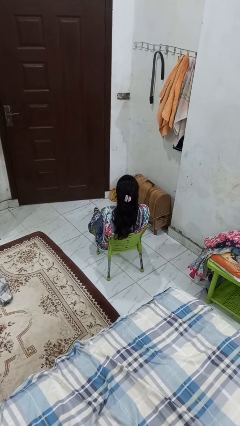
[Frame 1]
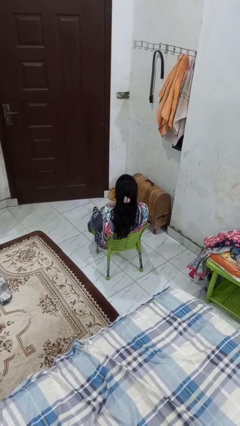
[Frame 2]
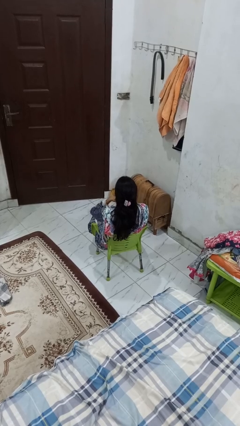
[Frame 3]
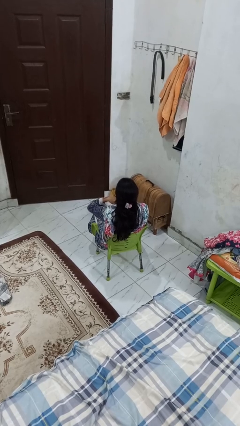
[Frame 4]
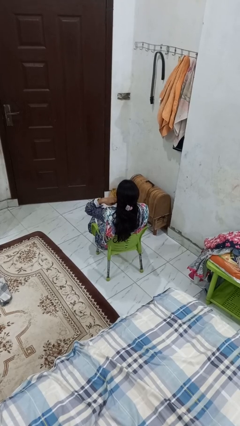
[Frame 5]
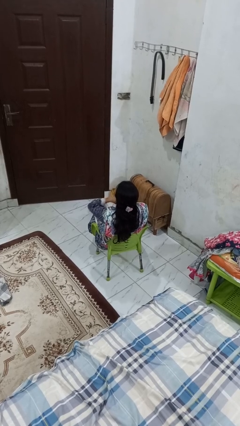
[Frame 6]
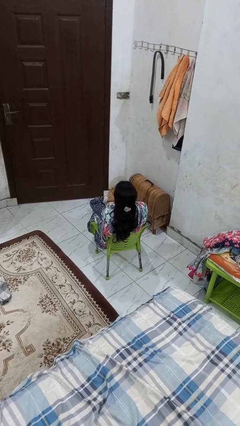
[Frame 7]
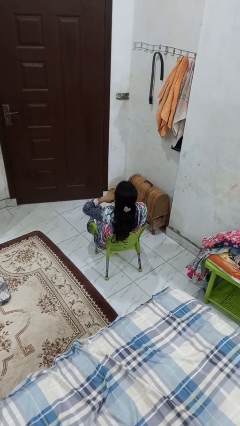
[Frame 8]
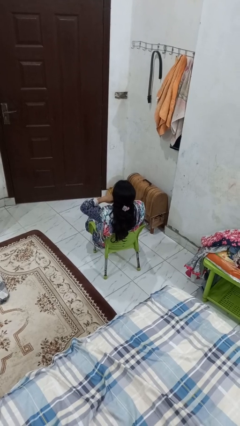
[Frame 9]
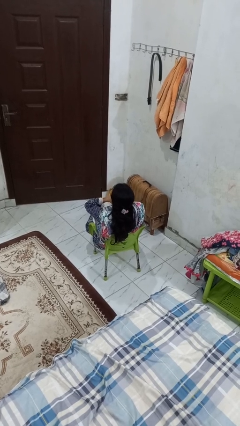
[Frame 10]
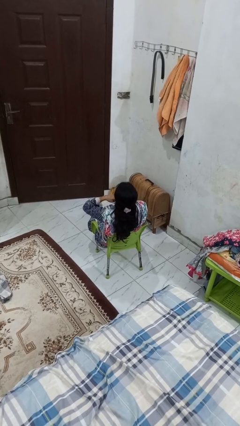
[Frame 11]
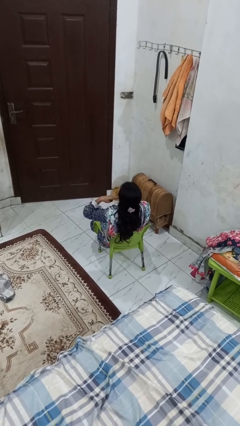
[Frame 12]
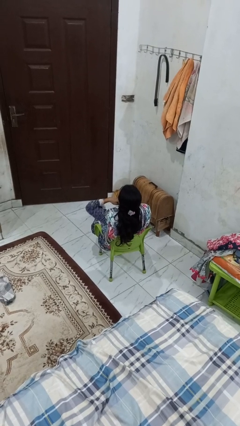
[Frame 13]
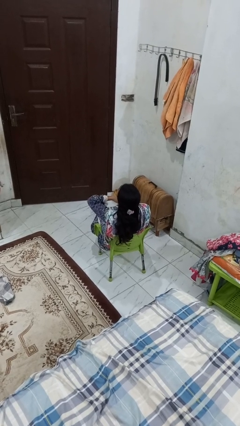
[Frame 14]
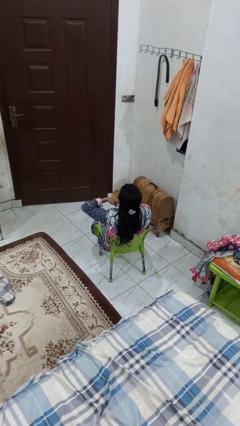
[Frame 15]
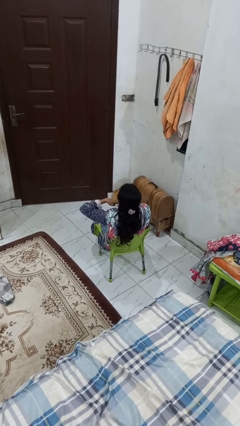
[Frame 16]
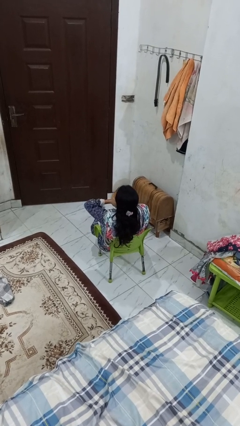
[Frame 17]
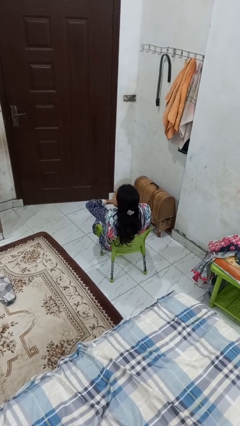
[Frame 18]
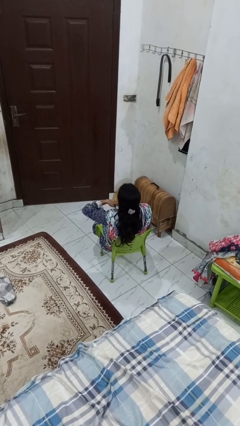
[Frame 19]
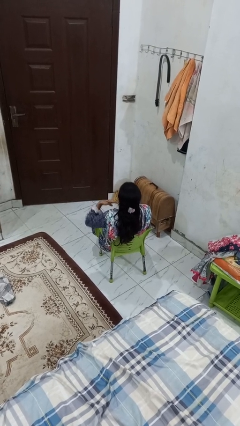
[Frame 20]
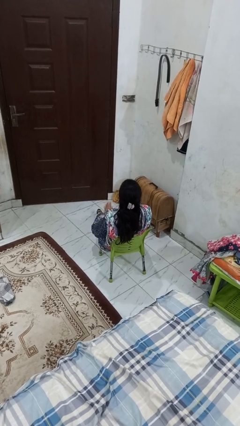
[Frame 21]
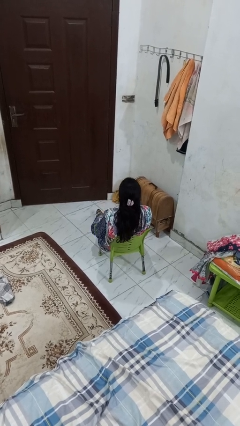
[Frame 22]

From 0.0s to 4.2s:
person gestures cut

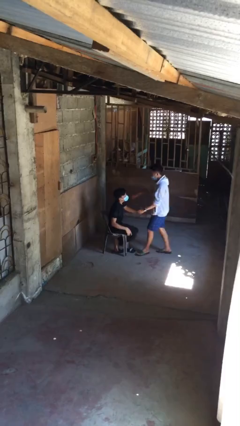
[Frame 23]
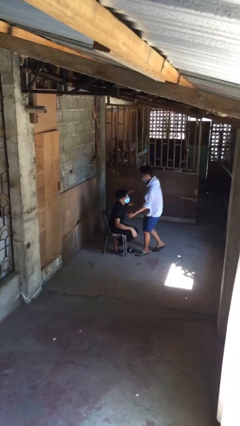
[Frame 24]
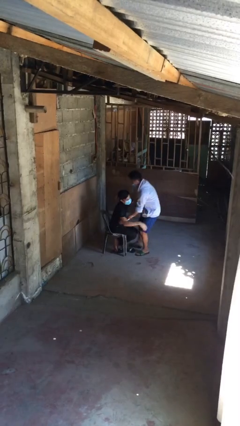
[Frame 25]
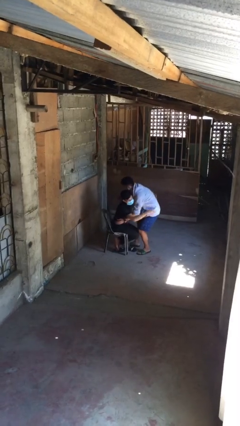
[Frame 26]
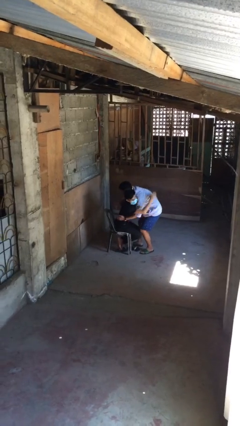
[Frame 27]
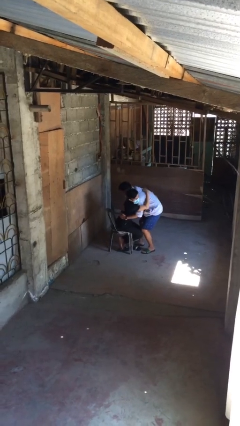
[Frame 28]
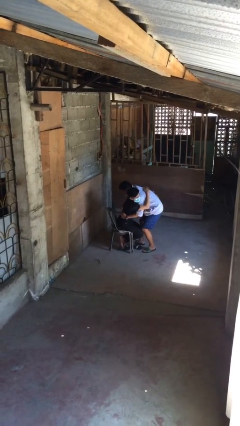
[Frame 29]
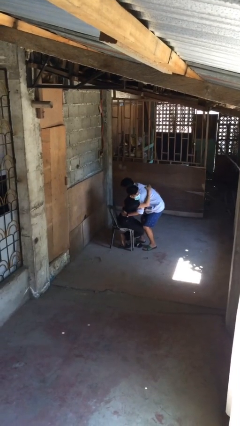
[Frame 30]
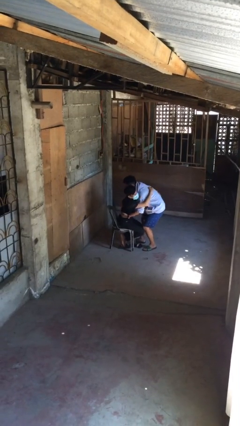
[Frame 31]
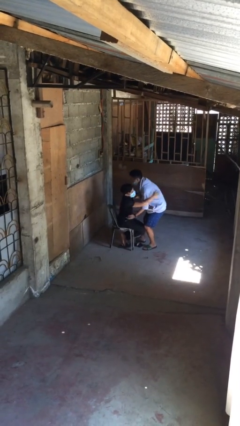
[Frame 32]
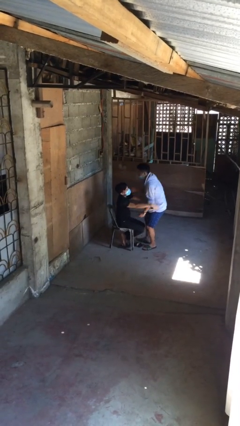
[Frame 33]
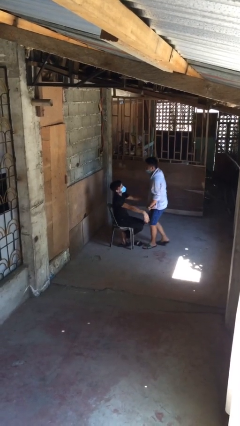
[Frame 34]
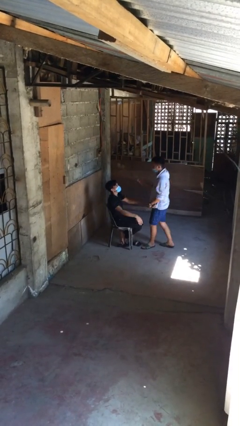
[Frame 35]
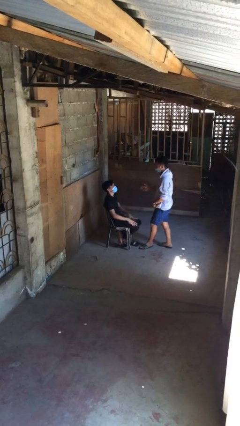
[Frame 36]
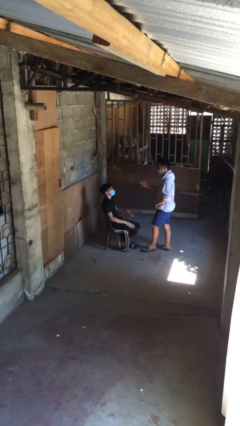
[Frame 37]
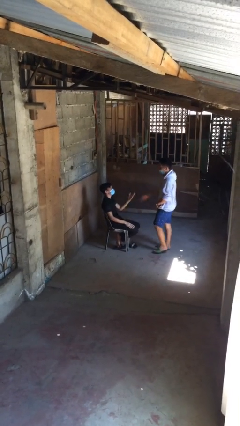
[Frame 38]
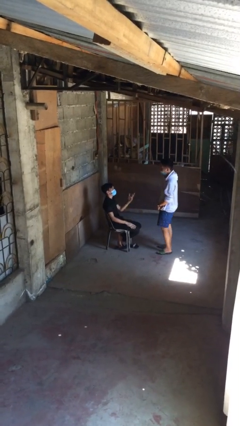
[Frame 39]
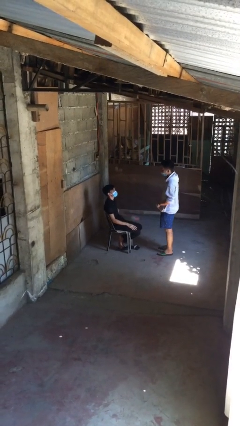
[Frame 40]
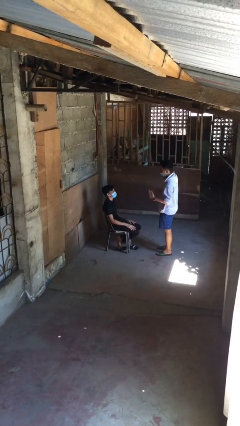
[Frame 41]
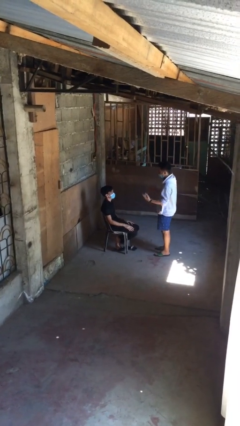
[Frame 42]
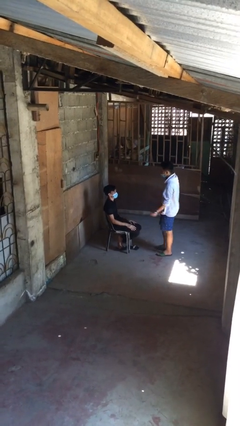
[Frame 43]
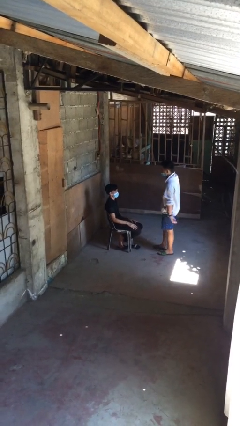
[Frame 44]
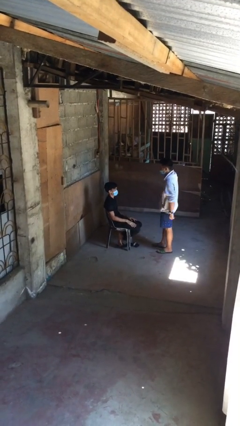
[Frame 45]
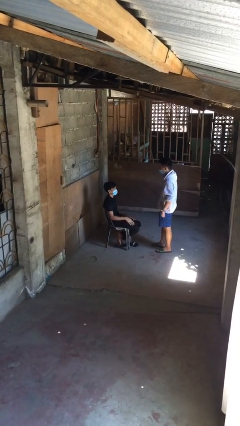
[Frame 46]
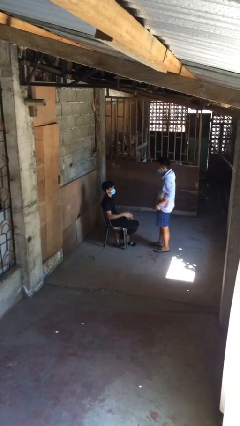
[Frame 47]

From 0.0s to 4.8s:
person embraces person

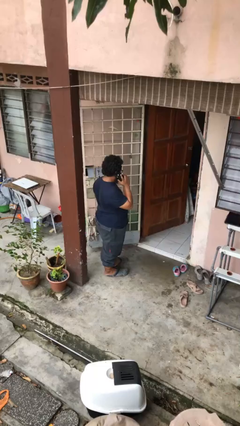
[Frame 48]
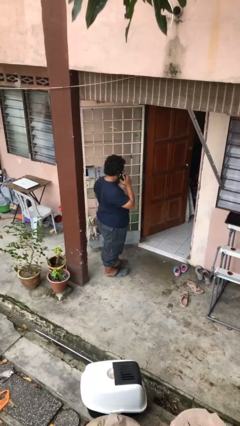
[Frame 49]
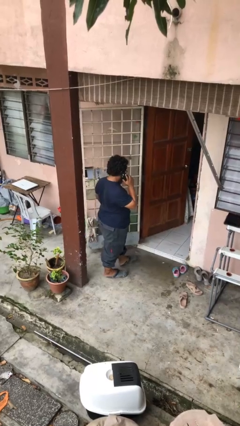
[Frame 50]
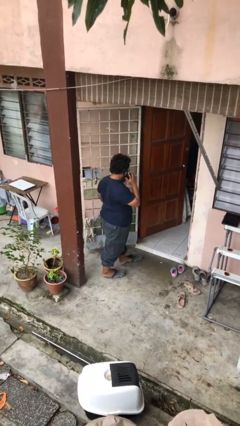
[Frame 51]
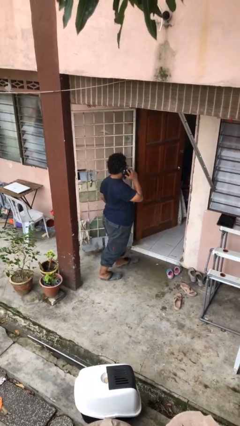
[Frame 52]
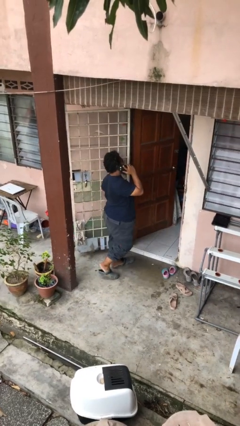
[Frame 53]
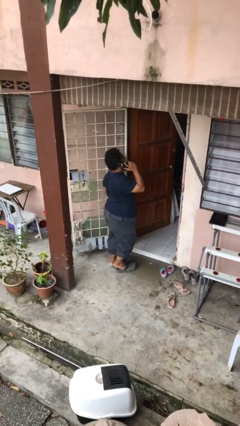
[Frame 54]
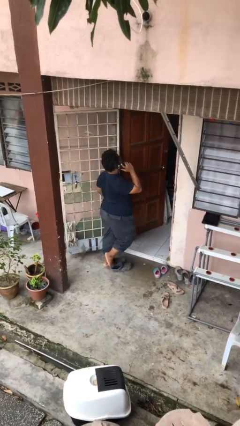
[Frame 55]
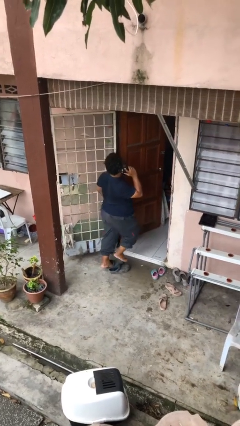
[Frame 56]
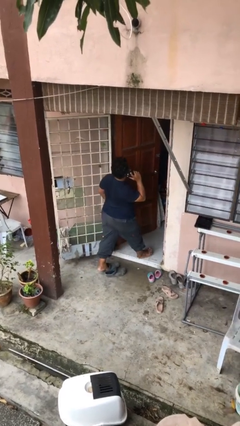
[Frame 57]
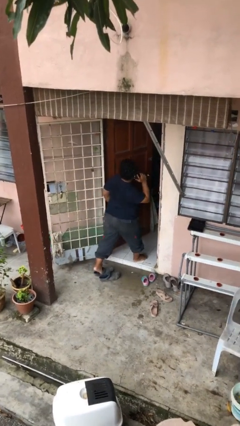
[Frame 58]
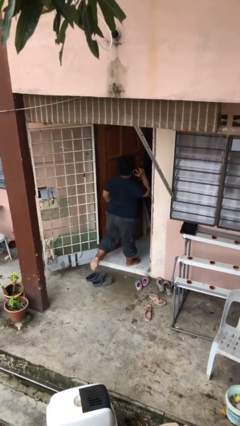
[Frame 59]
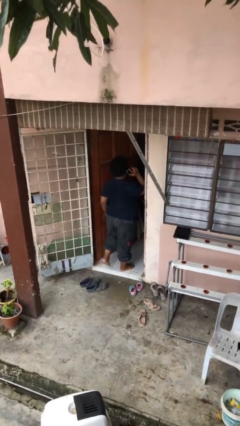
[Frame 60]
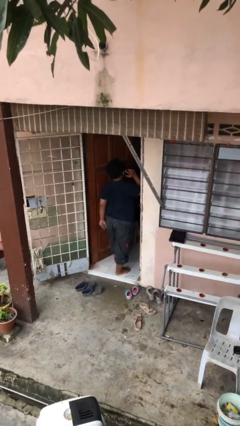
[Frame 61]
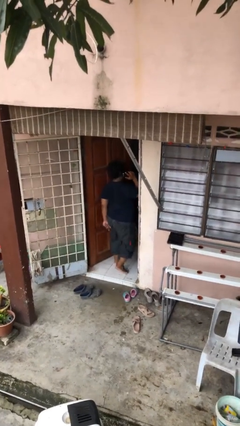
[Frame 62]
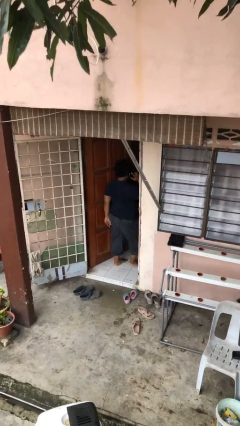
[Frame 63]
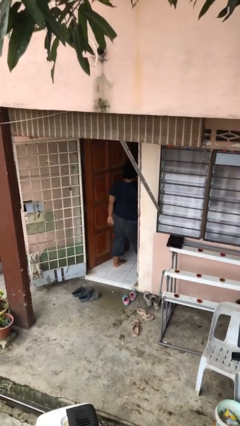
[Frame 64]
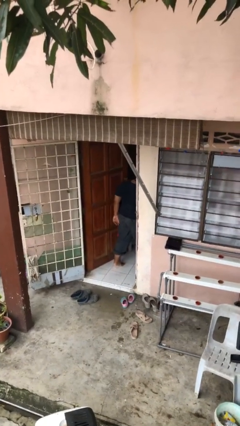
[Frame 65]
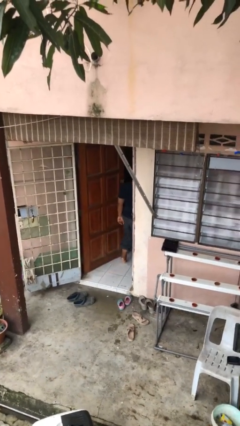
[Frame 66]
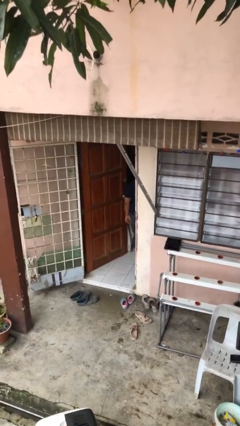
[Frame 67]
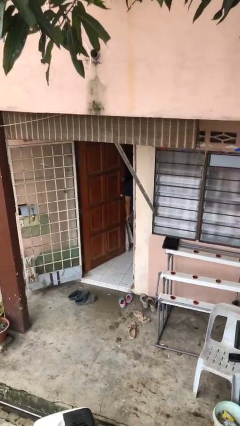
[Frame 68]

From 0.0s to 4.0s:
person exits scene through structure

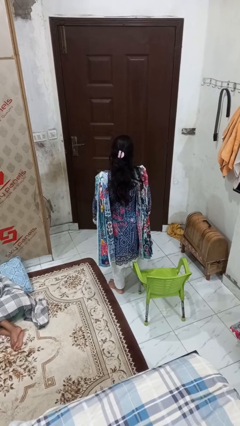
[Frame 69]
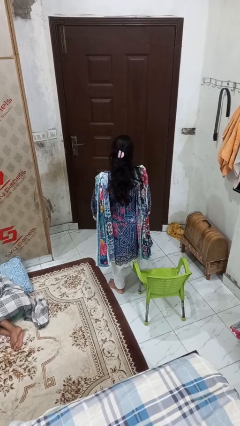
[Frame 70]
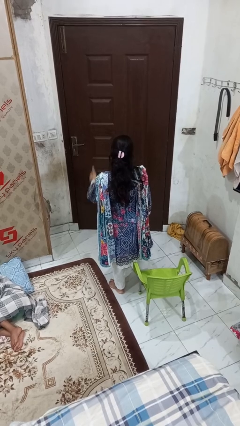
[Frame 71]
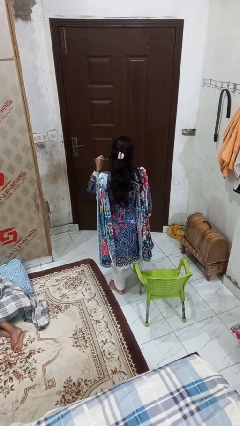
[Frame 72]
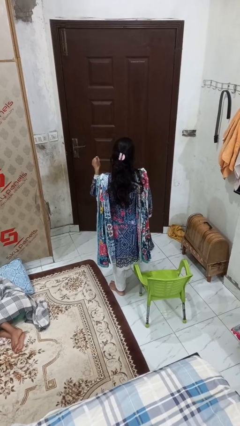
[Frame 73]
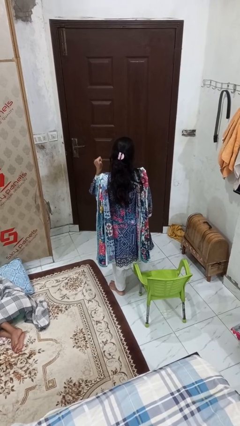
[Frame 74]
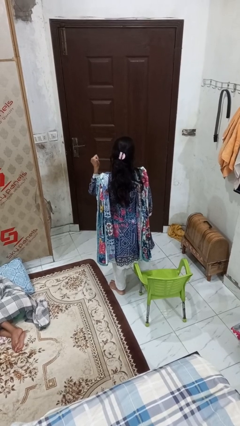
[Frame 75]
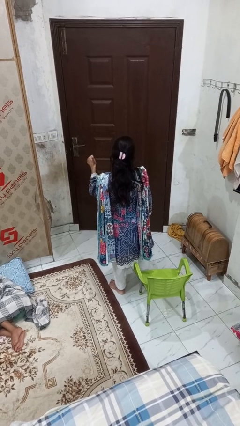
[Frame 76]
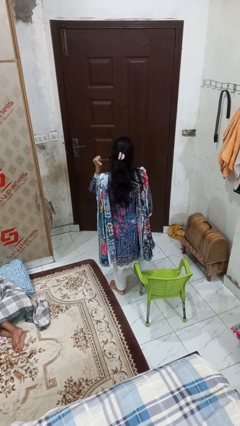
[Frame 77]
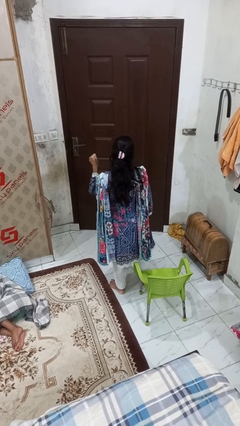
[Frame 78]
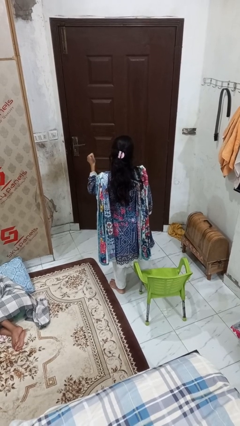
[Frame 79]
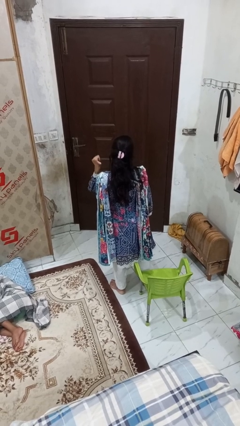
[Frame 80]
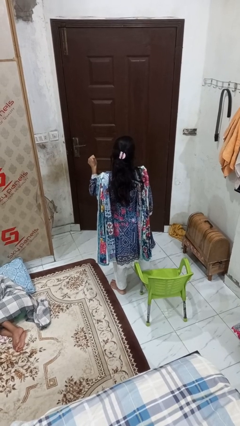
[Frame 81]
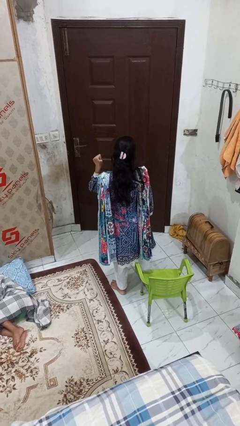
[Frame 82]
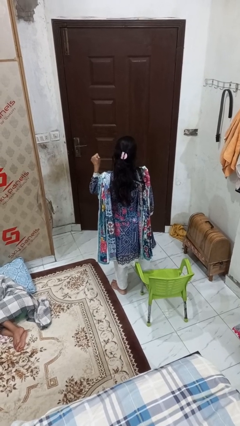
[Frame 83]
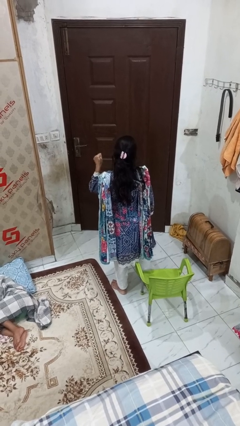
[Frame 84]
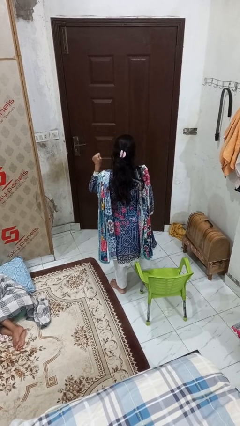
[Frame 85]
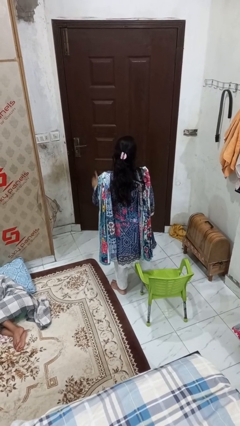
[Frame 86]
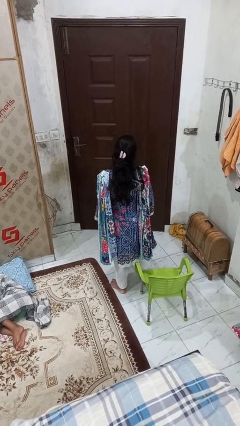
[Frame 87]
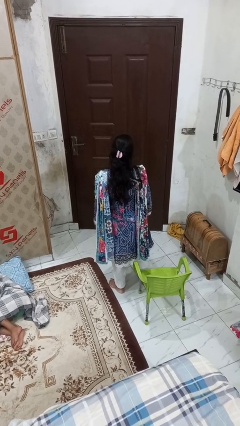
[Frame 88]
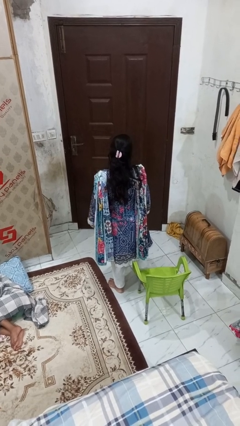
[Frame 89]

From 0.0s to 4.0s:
person gestures behind me

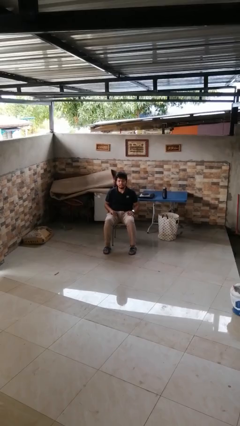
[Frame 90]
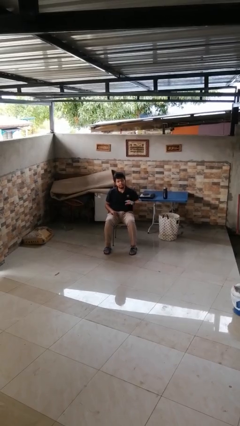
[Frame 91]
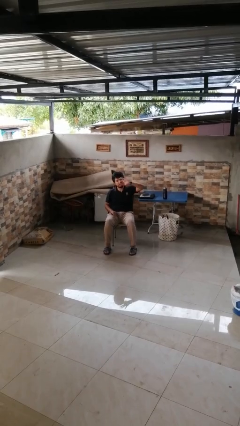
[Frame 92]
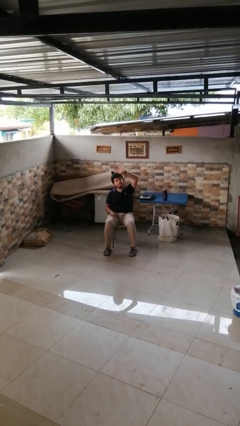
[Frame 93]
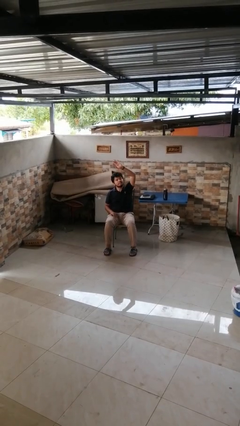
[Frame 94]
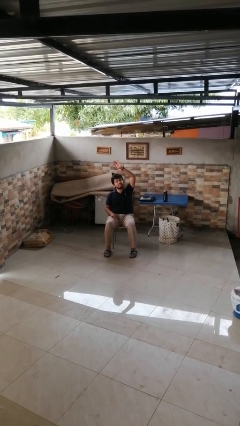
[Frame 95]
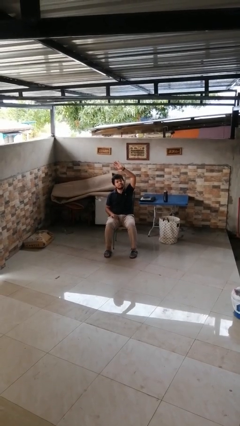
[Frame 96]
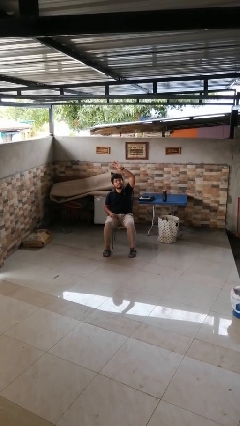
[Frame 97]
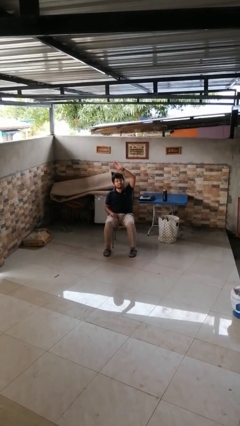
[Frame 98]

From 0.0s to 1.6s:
person gestures raise hand
